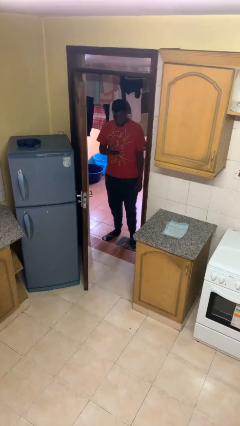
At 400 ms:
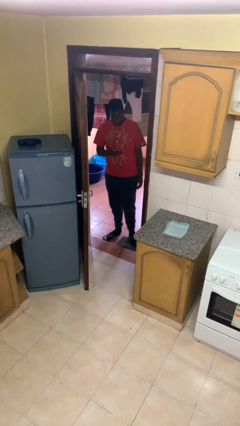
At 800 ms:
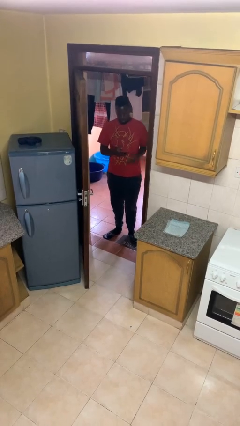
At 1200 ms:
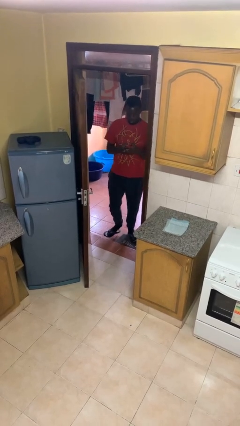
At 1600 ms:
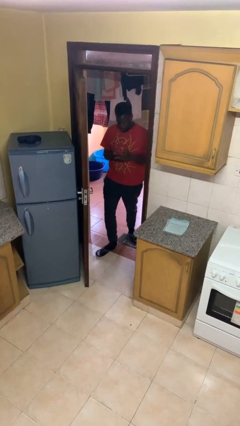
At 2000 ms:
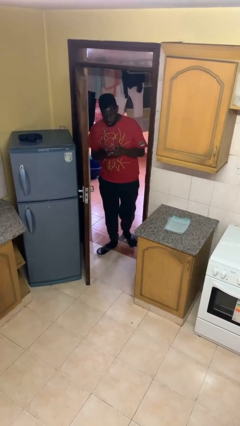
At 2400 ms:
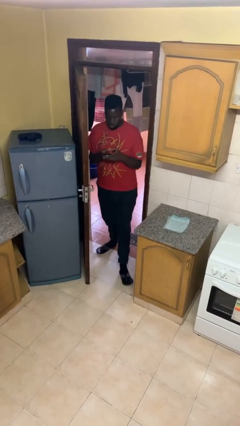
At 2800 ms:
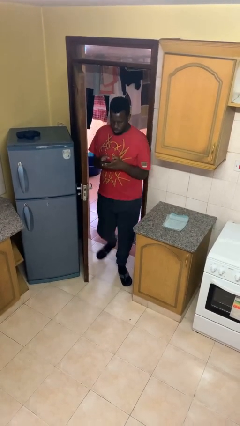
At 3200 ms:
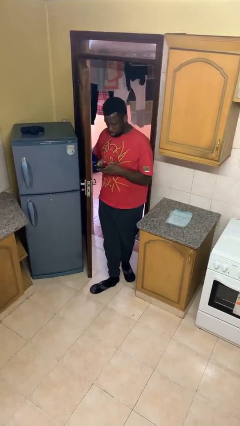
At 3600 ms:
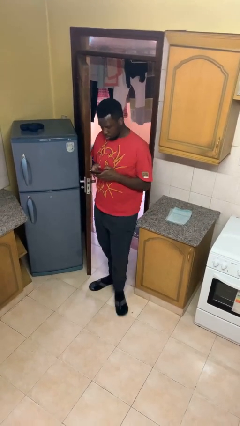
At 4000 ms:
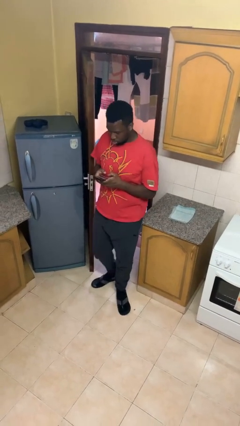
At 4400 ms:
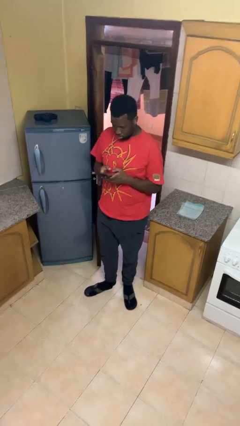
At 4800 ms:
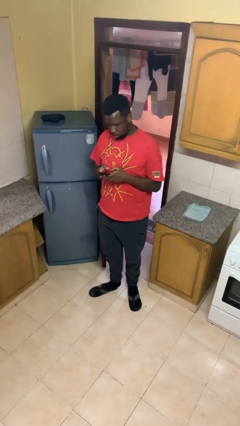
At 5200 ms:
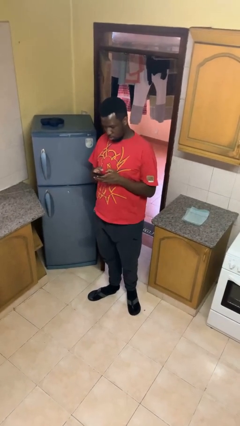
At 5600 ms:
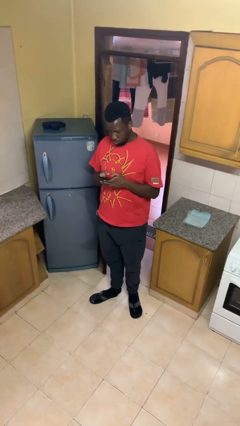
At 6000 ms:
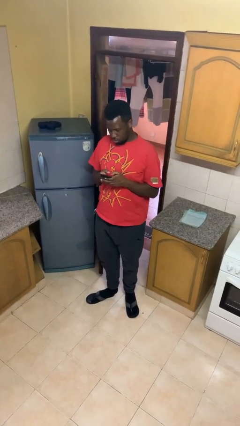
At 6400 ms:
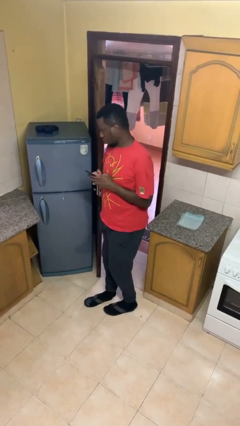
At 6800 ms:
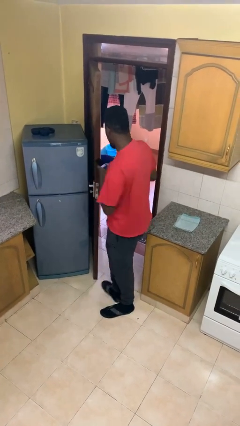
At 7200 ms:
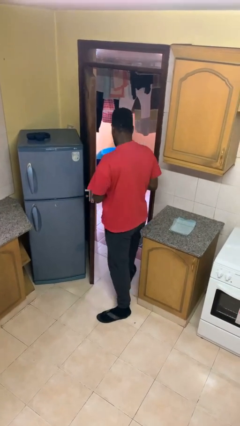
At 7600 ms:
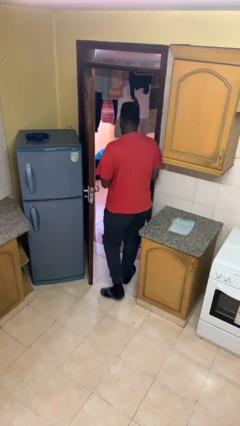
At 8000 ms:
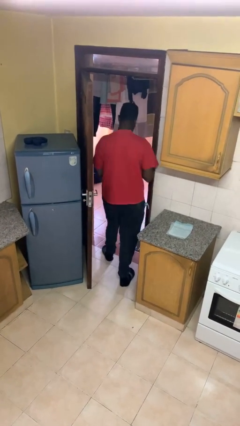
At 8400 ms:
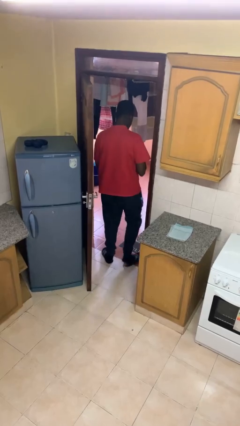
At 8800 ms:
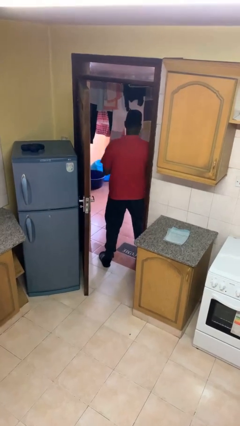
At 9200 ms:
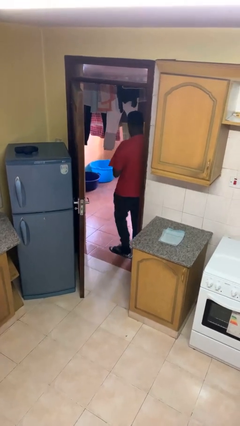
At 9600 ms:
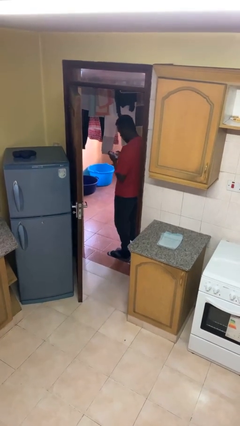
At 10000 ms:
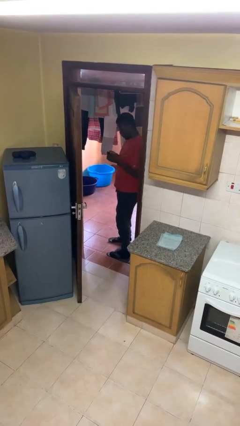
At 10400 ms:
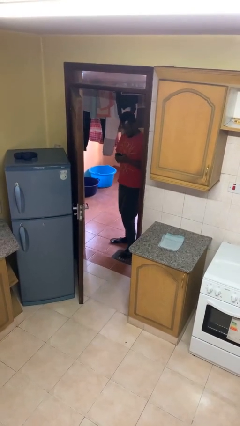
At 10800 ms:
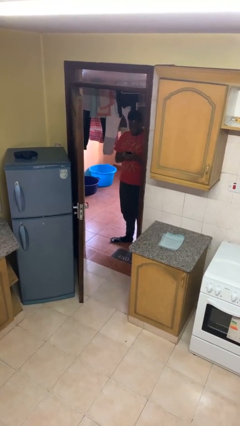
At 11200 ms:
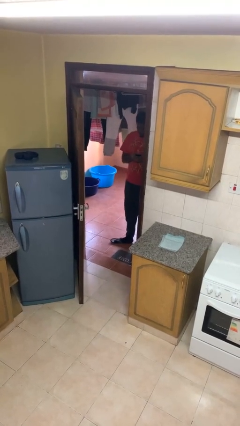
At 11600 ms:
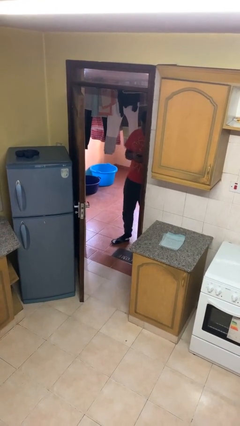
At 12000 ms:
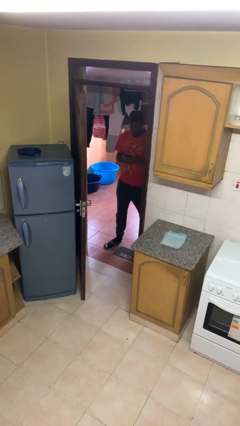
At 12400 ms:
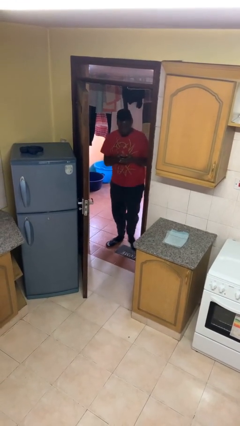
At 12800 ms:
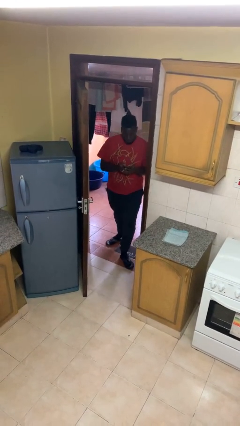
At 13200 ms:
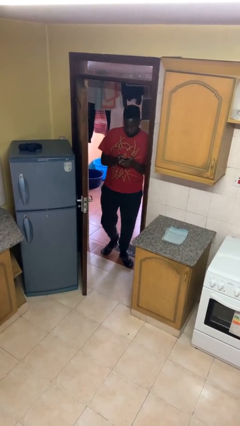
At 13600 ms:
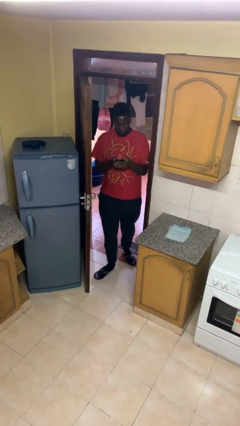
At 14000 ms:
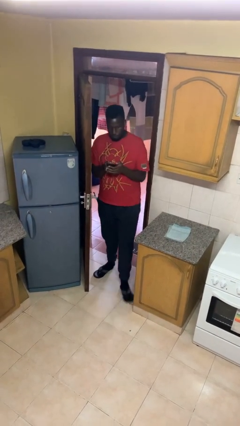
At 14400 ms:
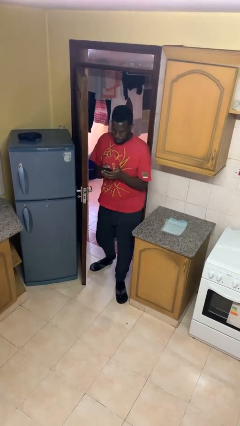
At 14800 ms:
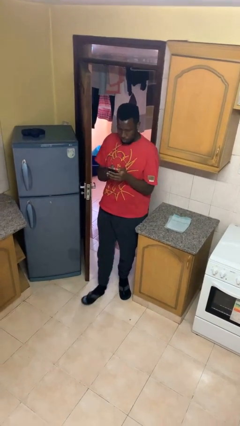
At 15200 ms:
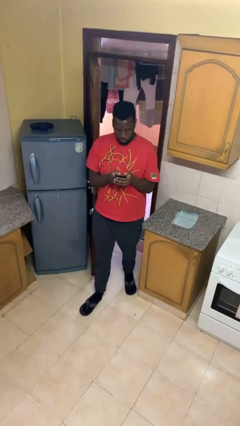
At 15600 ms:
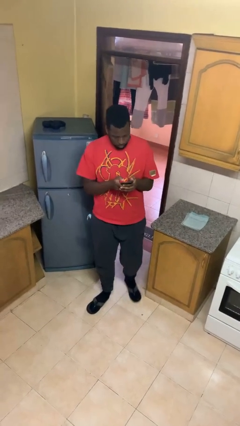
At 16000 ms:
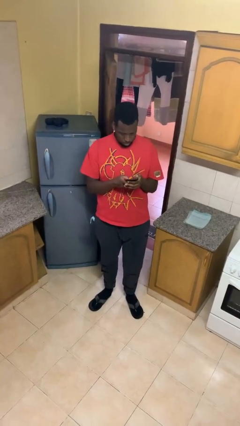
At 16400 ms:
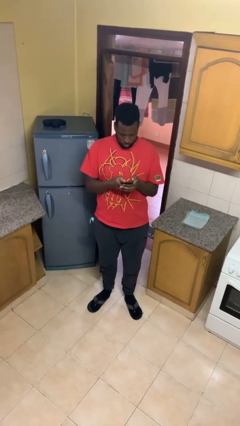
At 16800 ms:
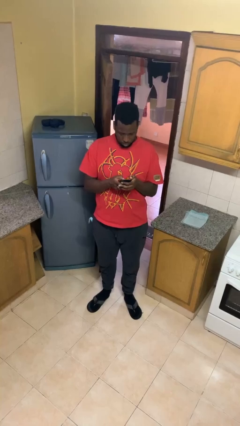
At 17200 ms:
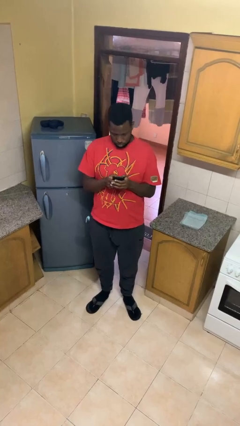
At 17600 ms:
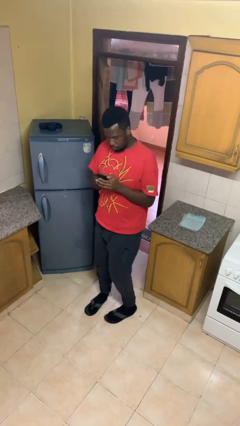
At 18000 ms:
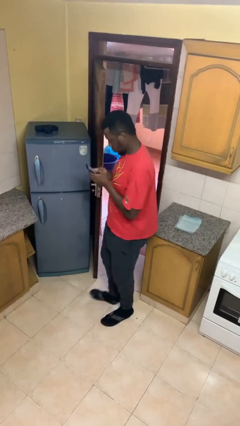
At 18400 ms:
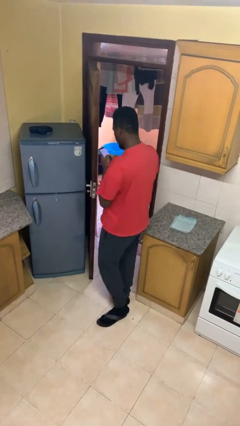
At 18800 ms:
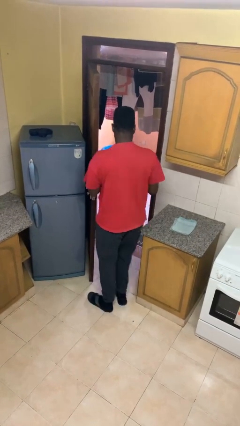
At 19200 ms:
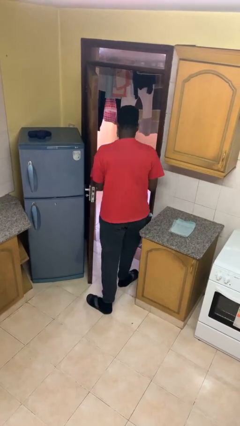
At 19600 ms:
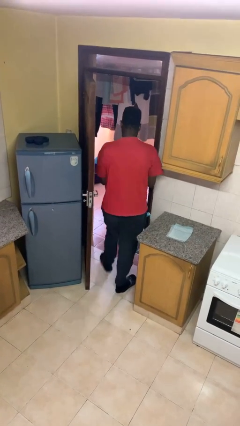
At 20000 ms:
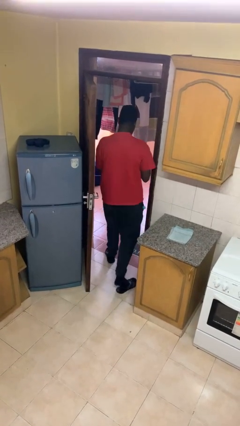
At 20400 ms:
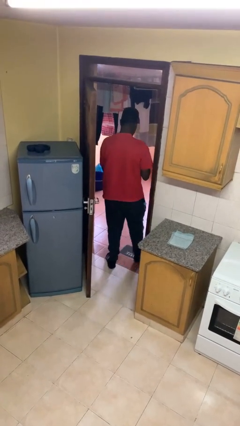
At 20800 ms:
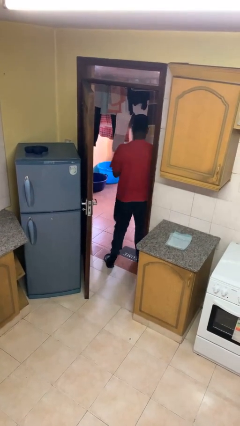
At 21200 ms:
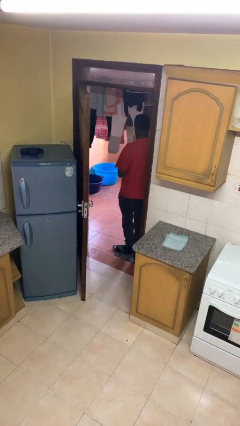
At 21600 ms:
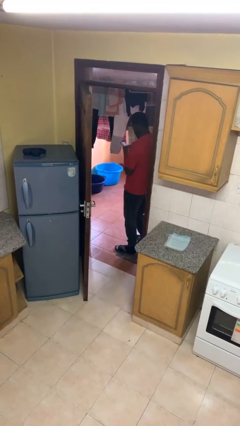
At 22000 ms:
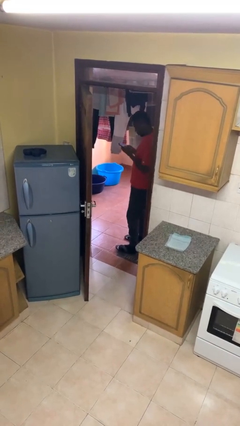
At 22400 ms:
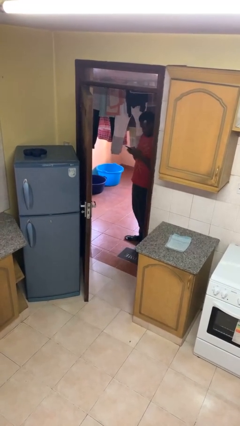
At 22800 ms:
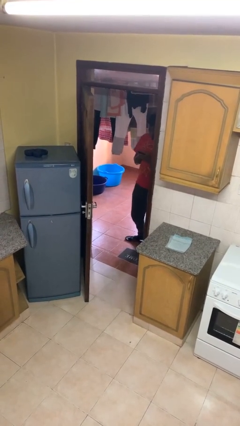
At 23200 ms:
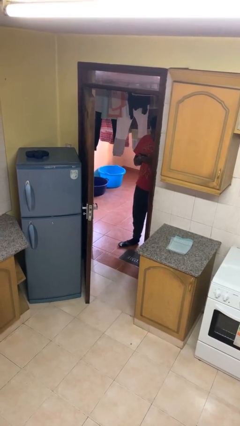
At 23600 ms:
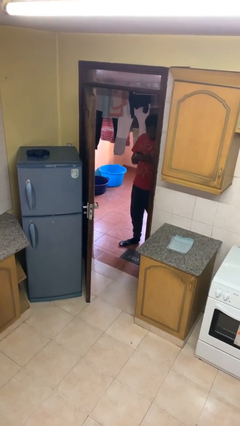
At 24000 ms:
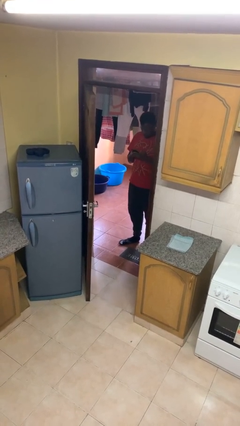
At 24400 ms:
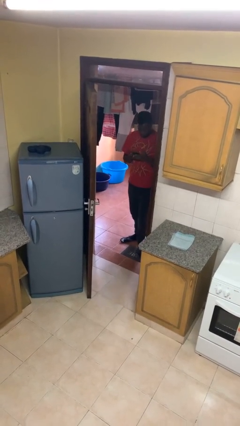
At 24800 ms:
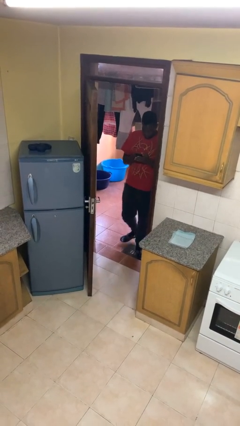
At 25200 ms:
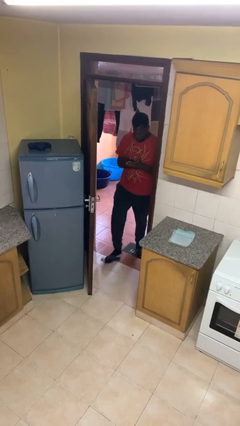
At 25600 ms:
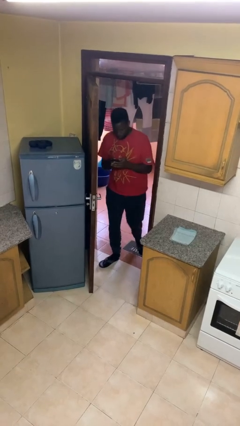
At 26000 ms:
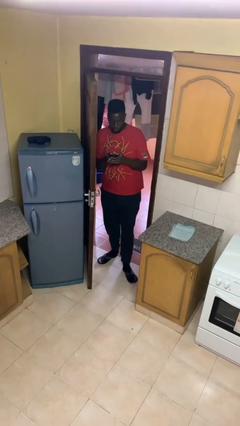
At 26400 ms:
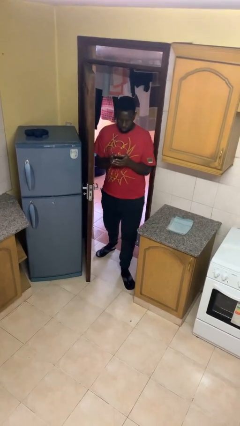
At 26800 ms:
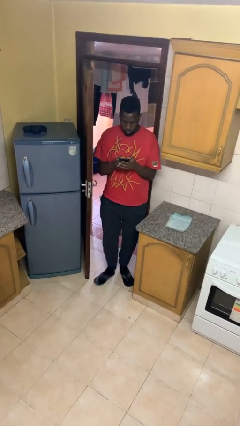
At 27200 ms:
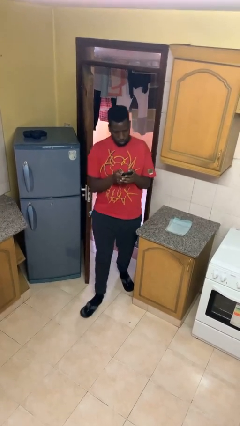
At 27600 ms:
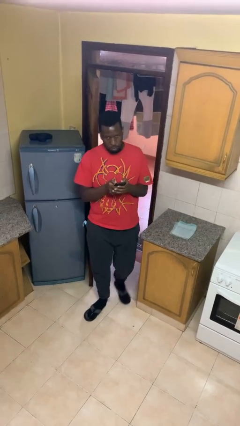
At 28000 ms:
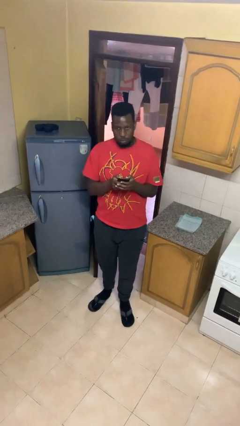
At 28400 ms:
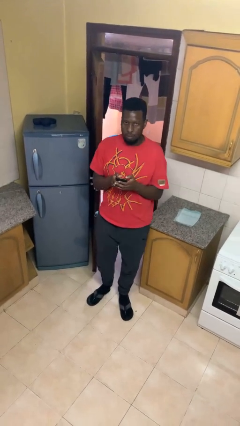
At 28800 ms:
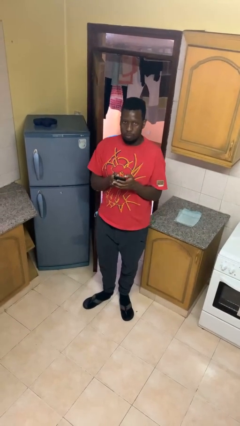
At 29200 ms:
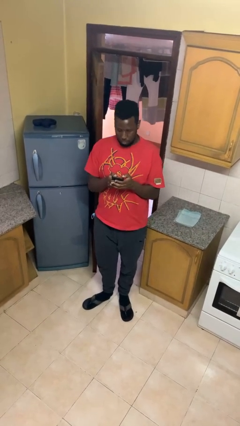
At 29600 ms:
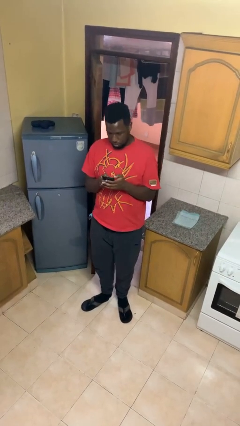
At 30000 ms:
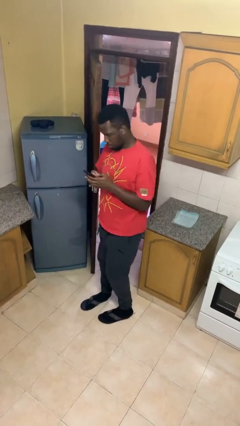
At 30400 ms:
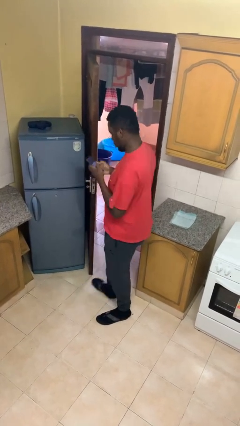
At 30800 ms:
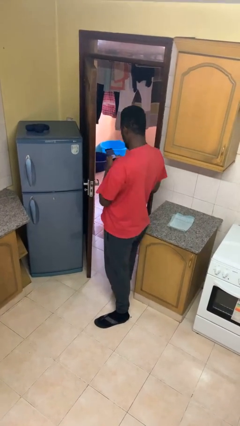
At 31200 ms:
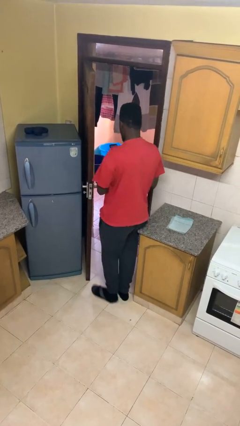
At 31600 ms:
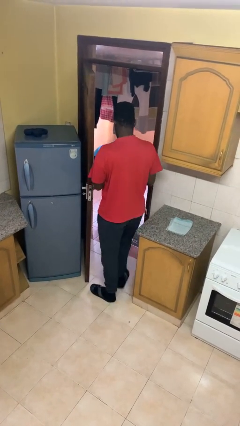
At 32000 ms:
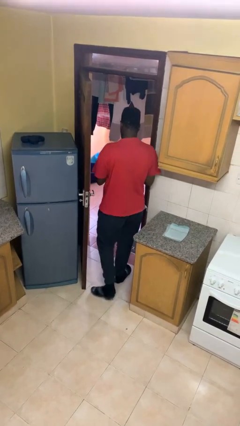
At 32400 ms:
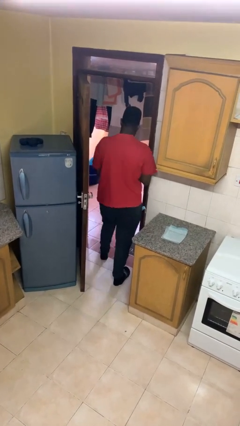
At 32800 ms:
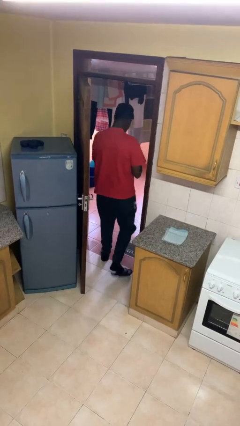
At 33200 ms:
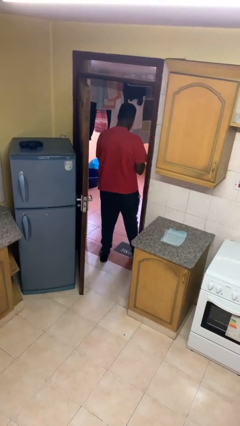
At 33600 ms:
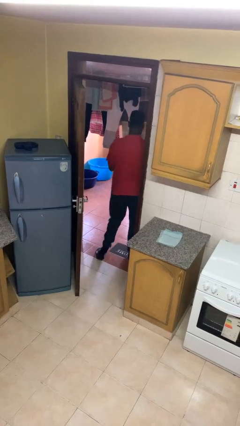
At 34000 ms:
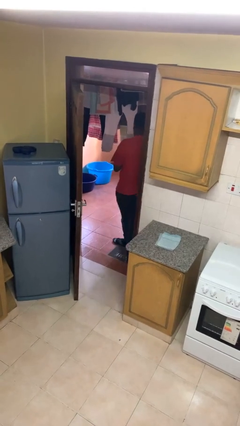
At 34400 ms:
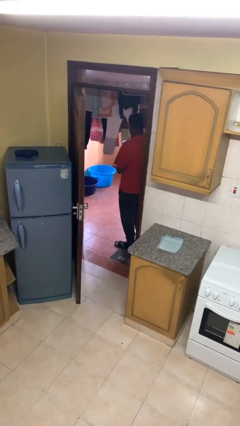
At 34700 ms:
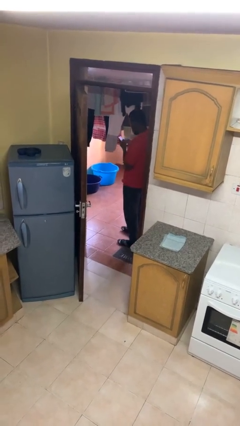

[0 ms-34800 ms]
person texts on phone

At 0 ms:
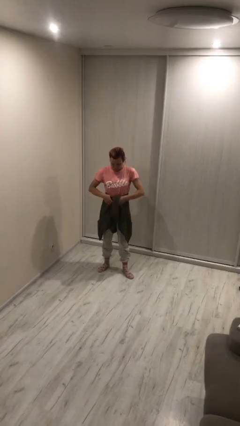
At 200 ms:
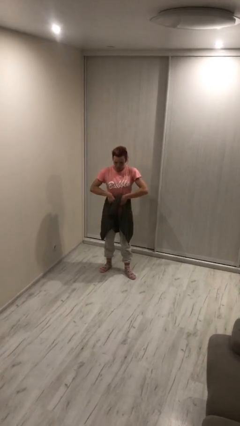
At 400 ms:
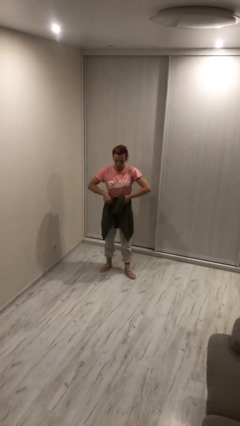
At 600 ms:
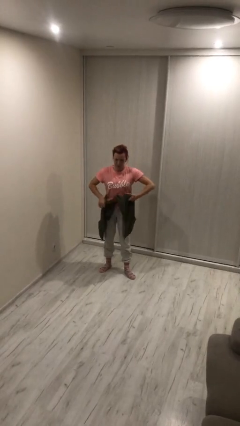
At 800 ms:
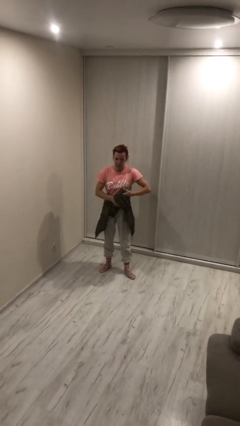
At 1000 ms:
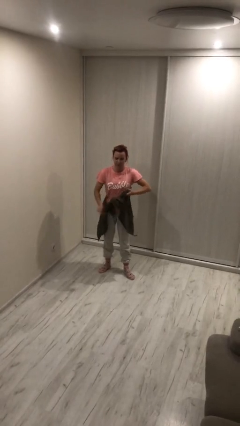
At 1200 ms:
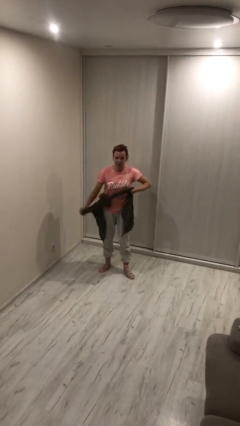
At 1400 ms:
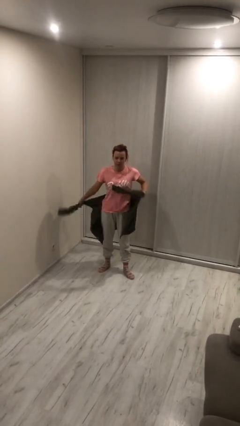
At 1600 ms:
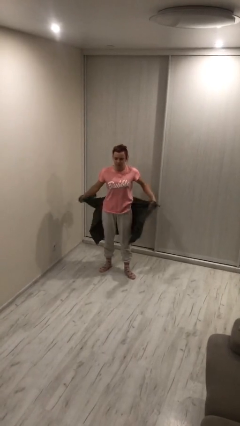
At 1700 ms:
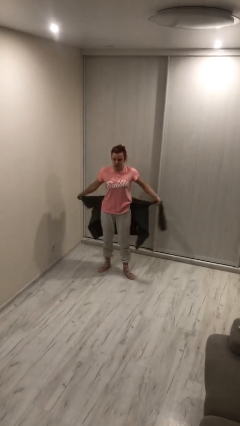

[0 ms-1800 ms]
person unties jacket around waist
